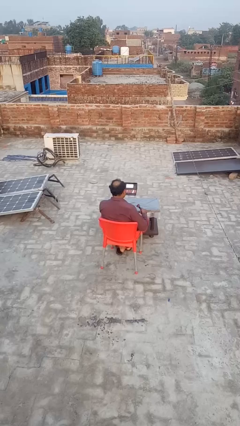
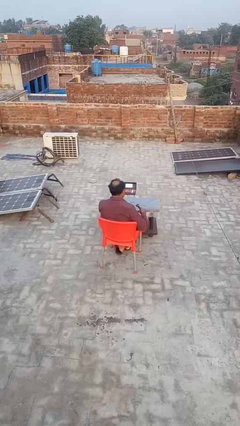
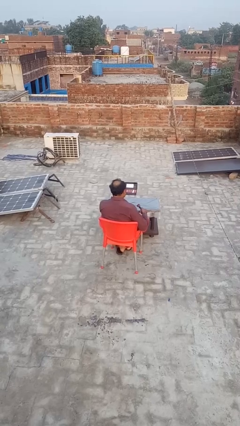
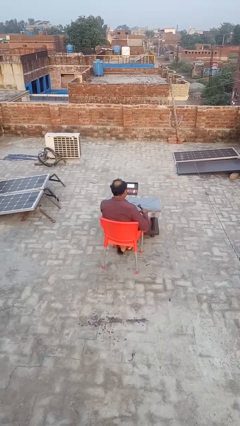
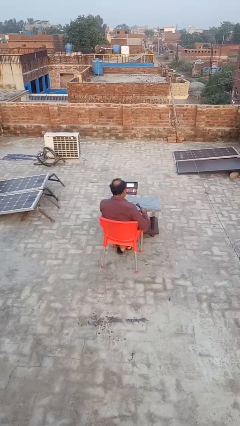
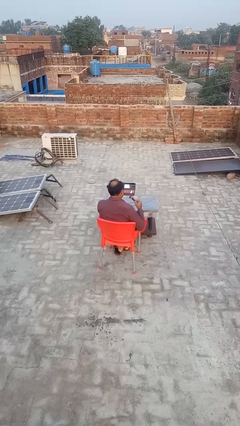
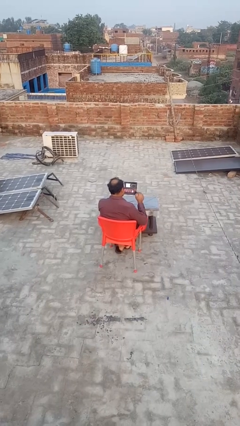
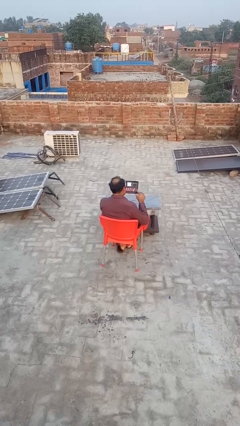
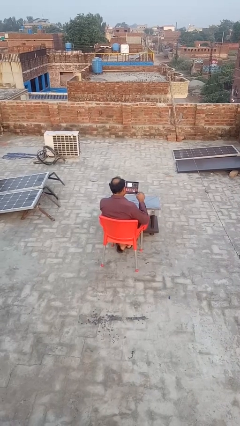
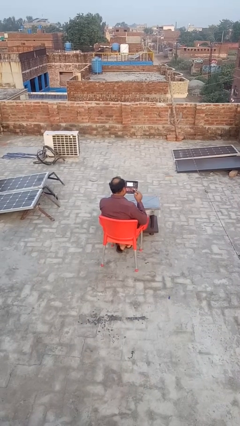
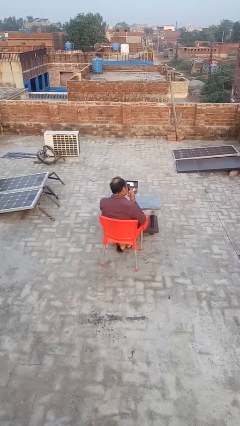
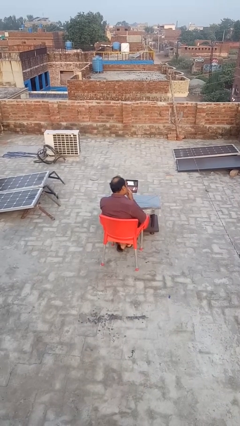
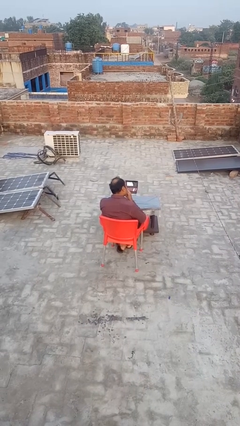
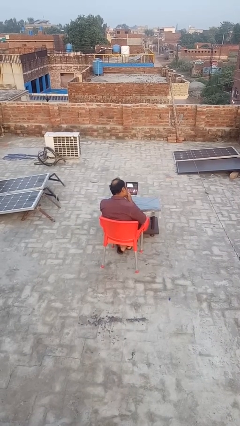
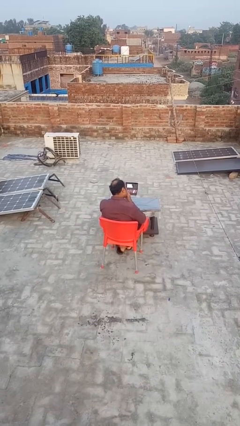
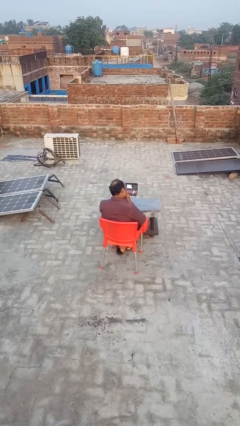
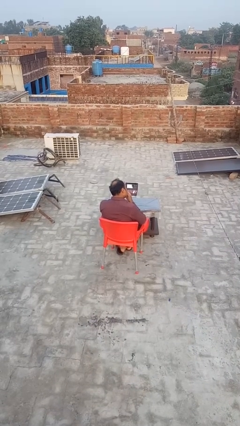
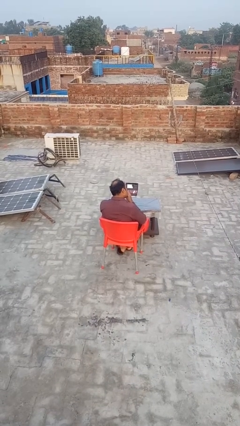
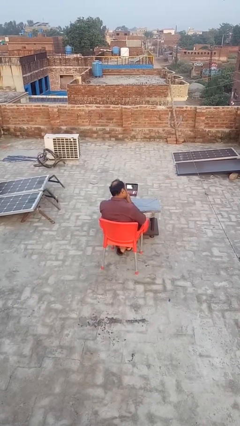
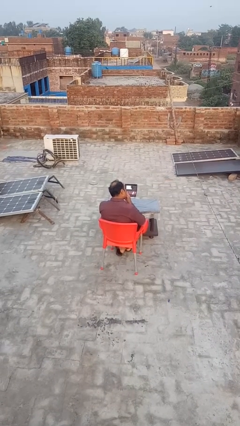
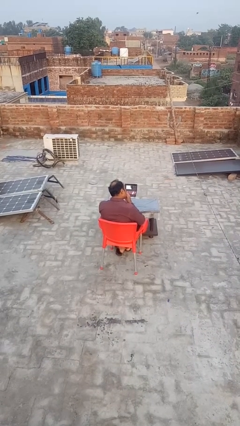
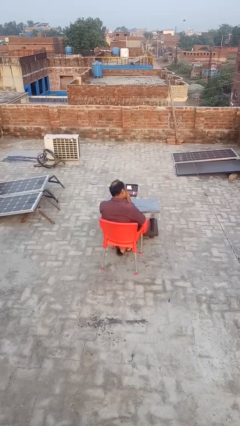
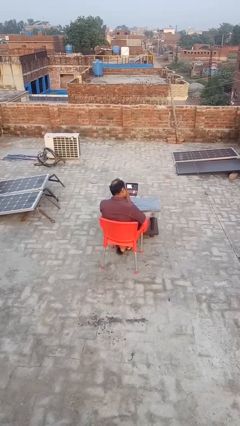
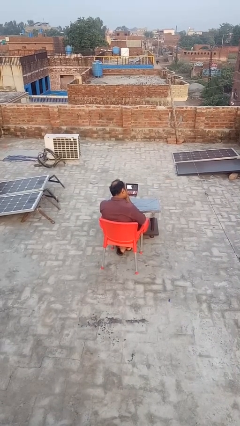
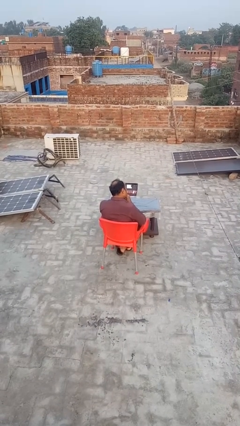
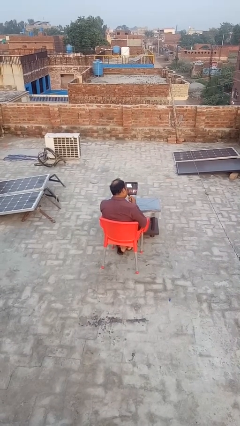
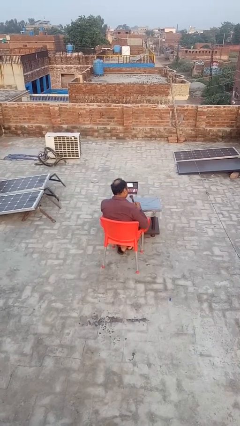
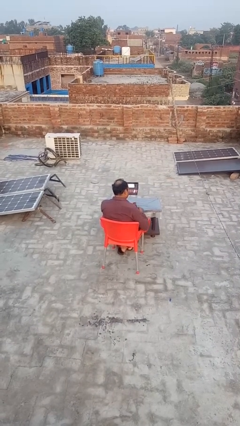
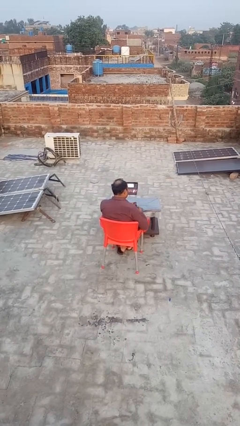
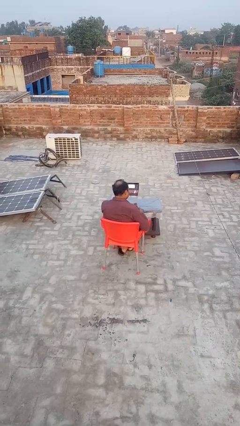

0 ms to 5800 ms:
person applies eye makeup

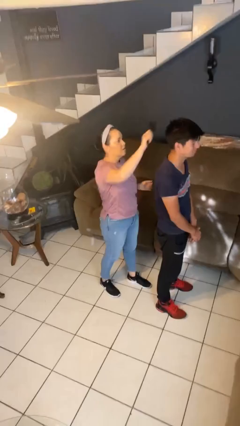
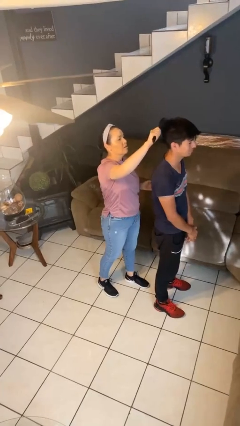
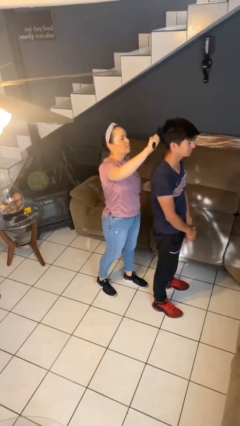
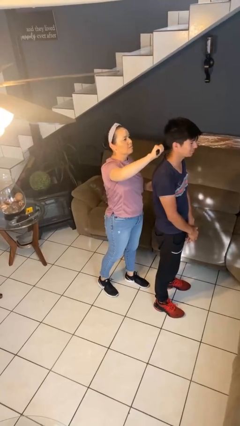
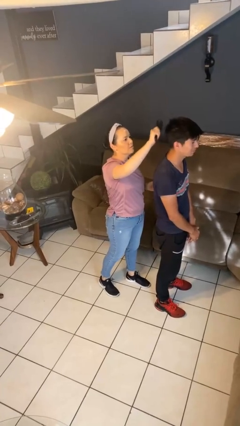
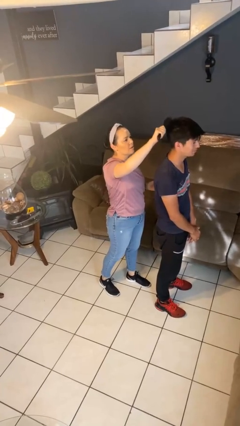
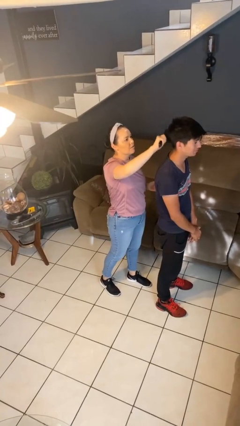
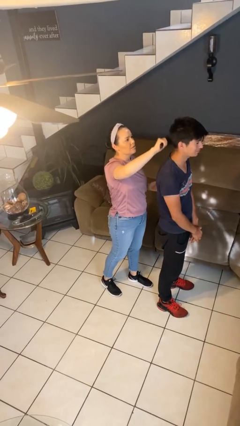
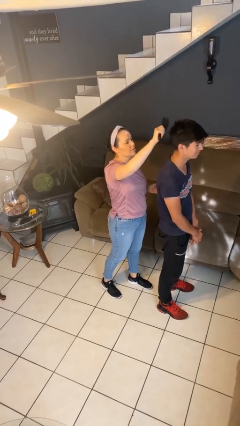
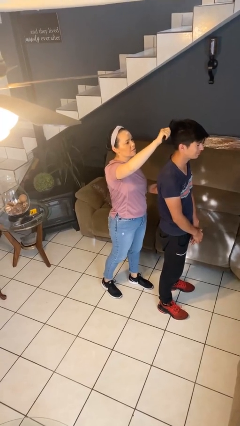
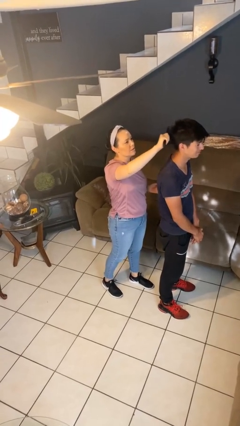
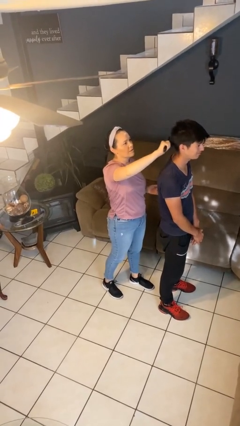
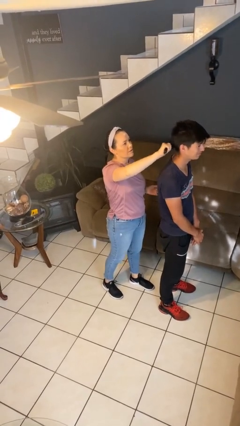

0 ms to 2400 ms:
person brushes hair of person

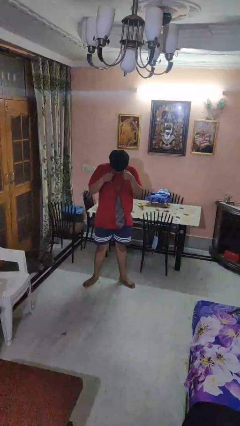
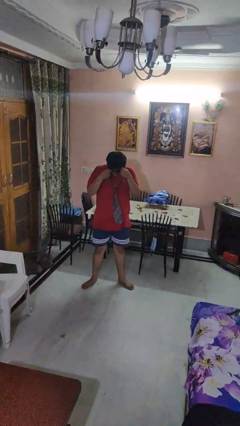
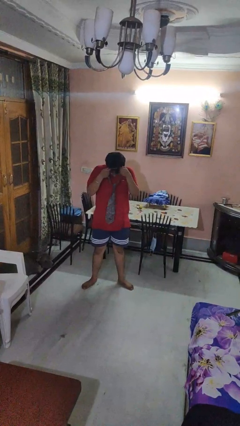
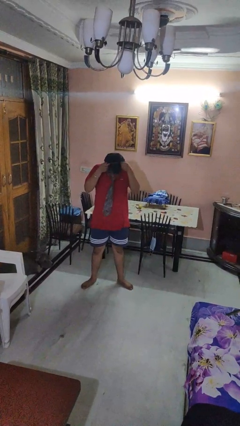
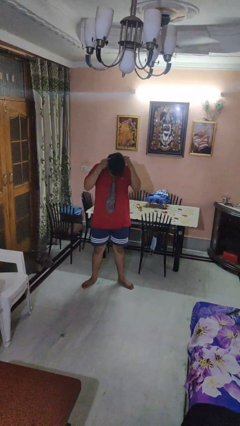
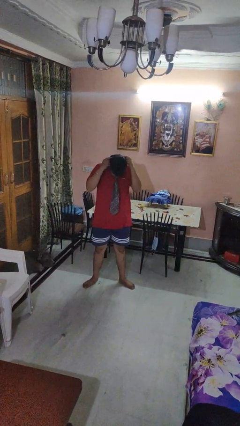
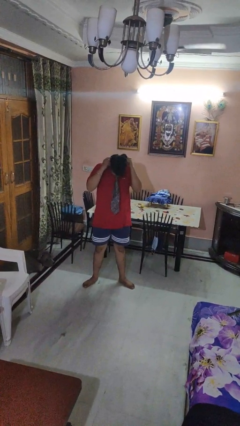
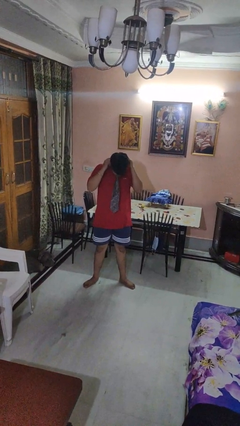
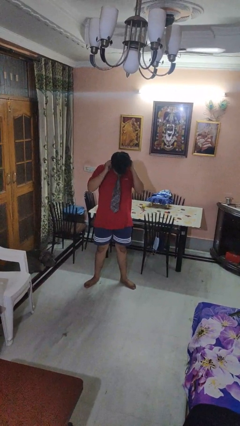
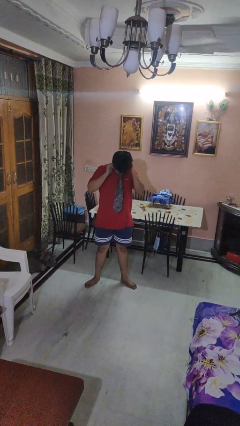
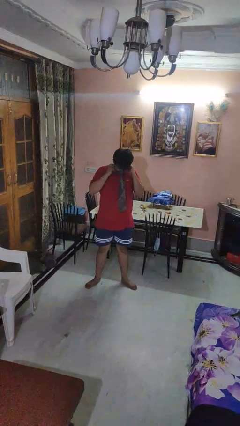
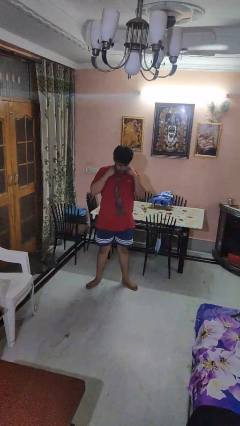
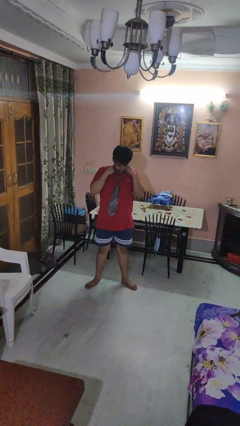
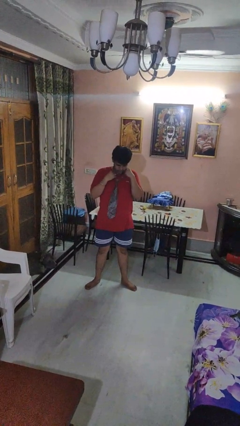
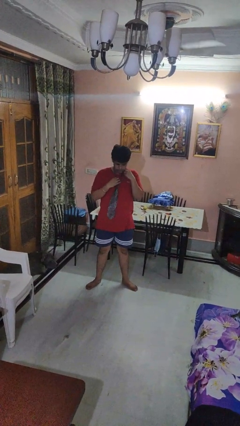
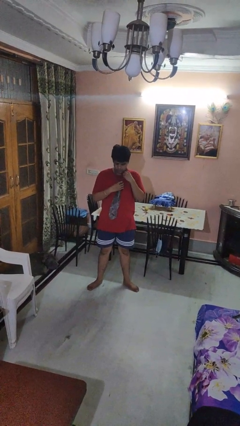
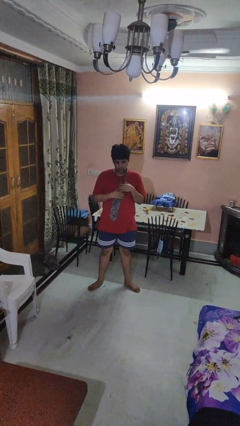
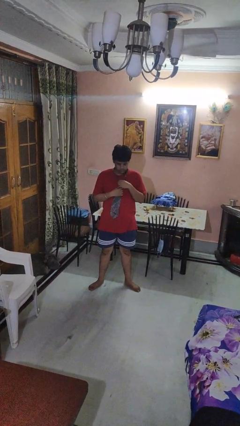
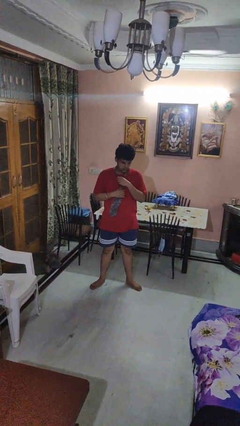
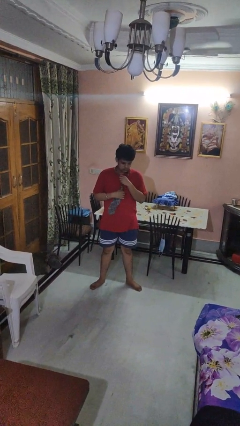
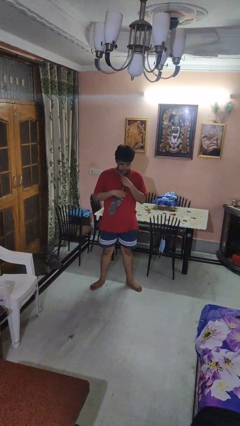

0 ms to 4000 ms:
person puts on necktie

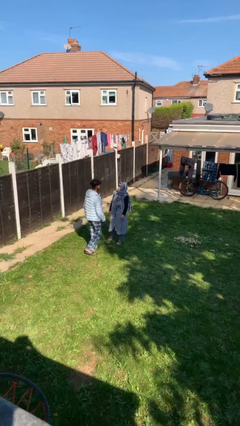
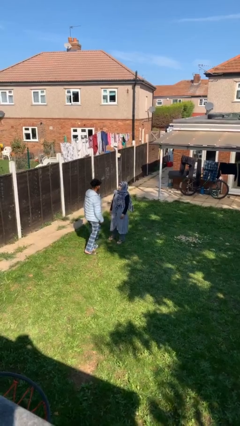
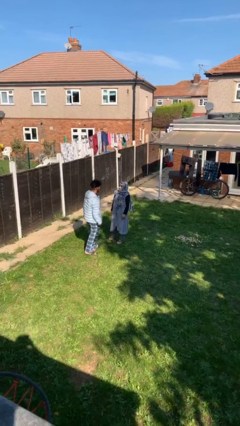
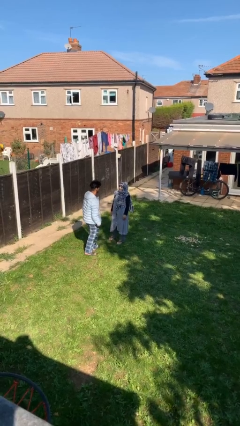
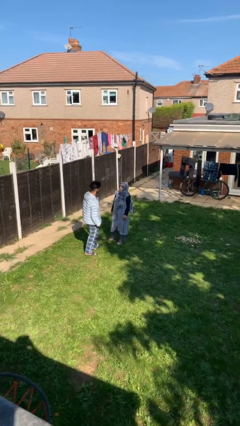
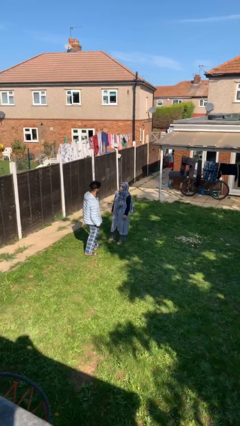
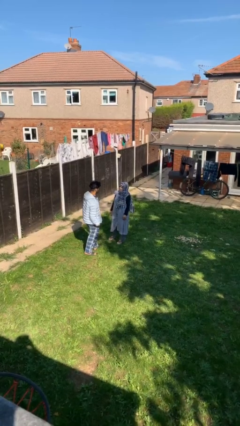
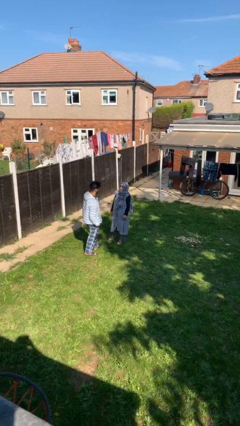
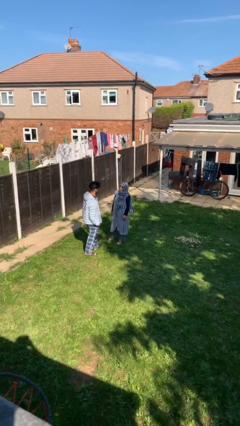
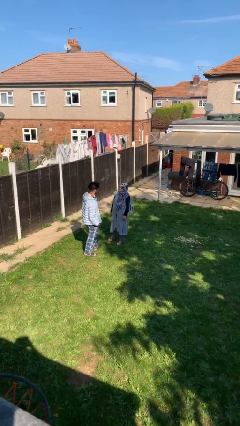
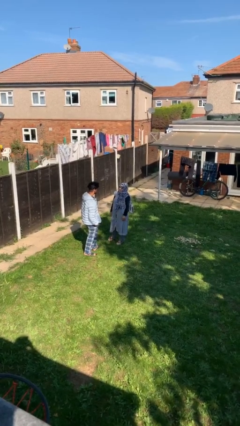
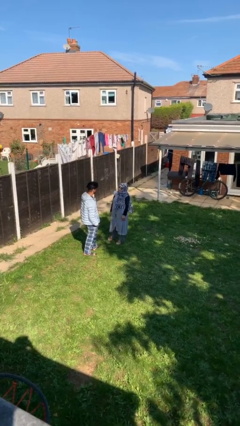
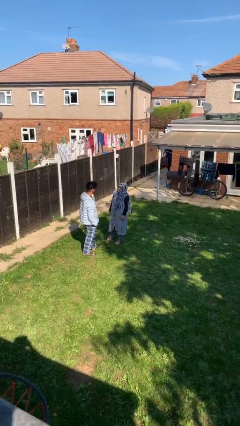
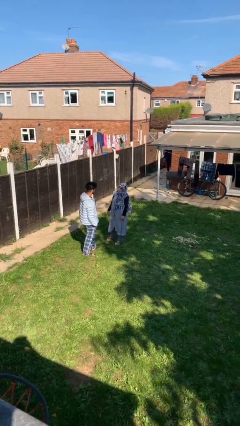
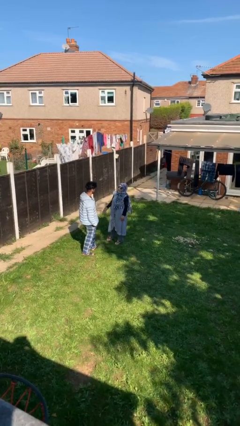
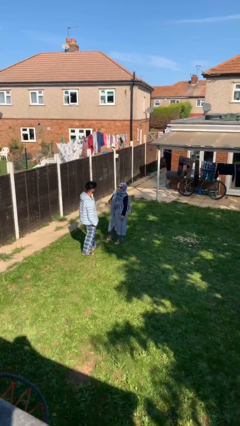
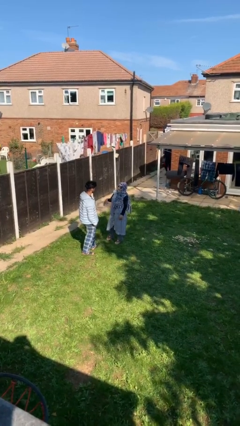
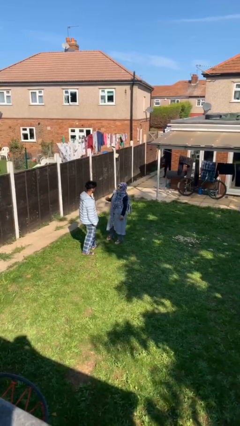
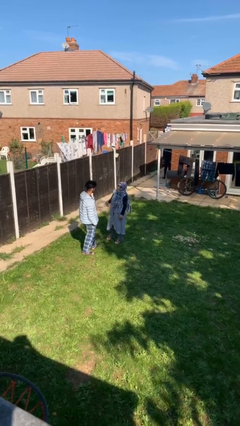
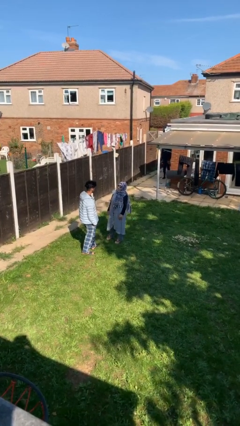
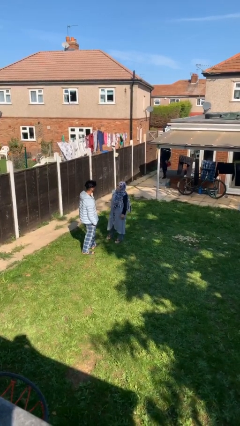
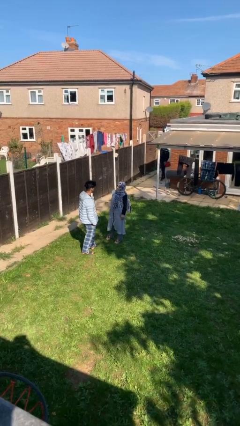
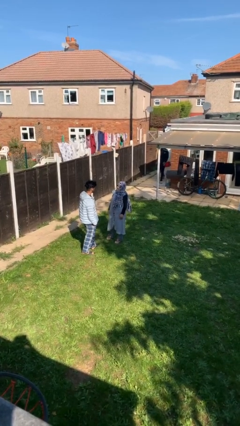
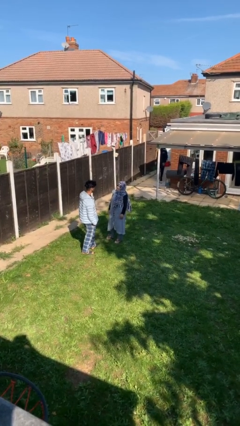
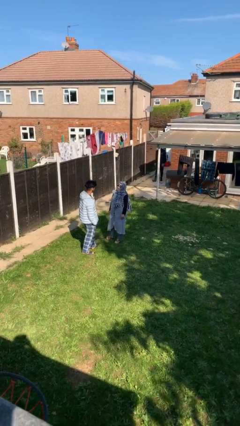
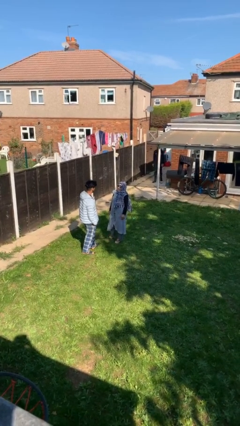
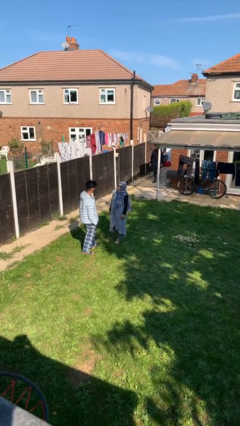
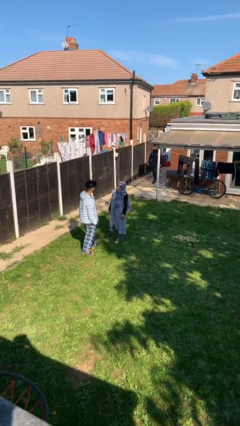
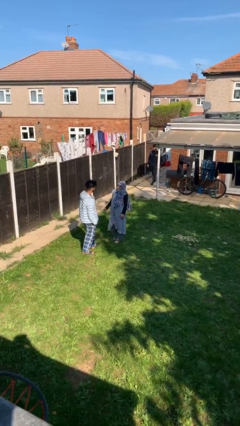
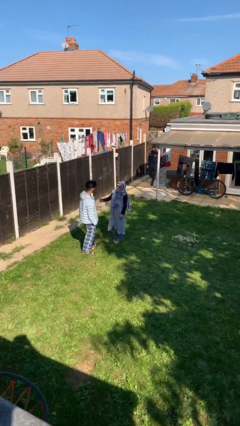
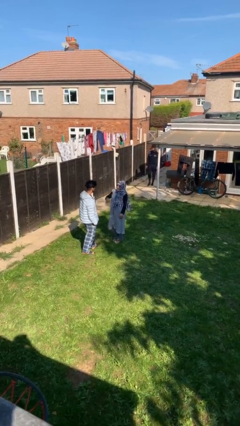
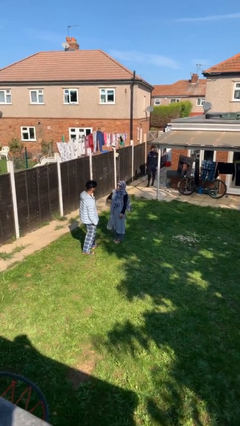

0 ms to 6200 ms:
person talks to person
